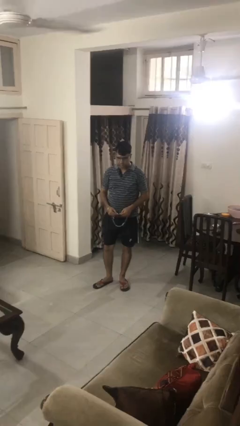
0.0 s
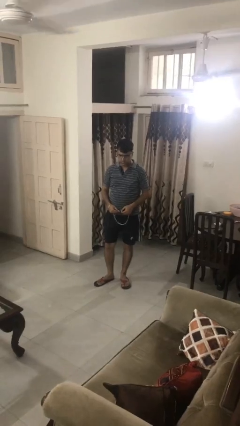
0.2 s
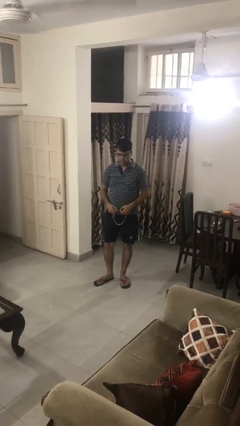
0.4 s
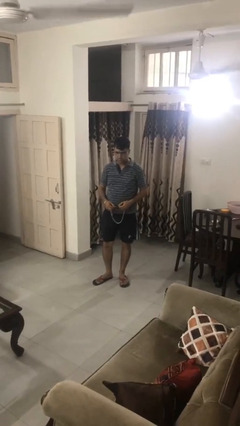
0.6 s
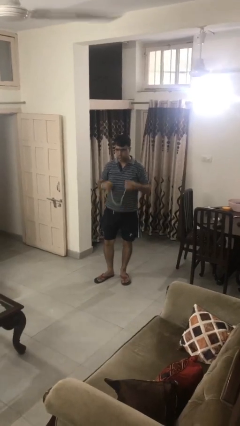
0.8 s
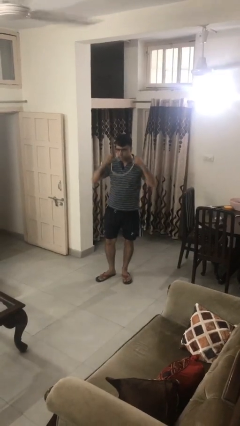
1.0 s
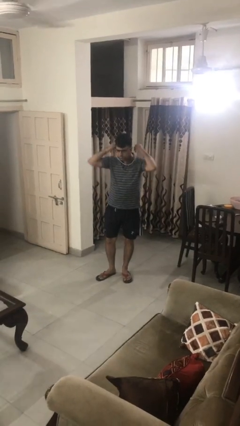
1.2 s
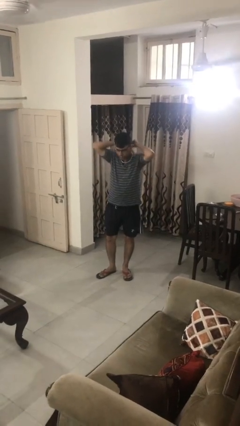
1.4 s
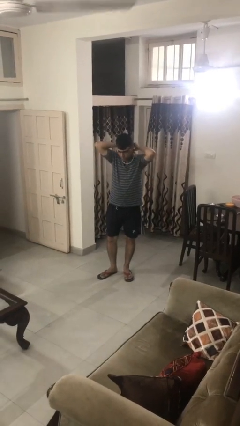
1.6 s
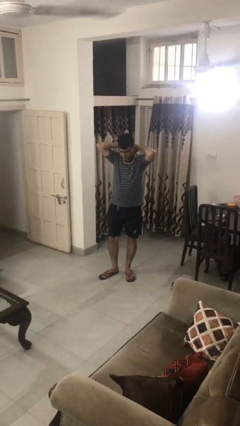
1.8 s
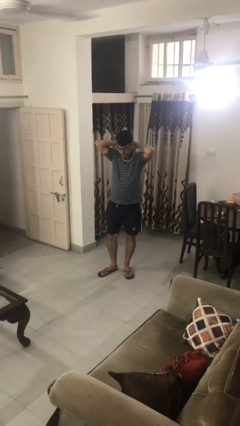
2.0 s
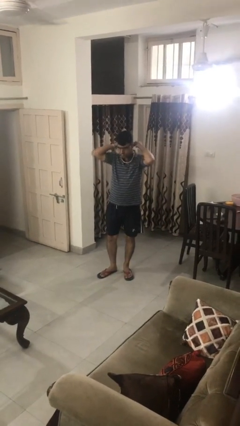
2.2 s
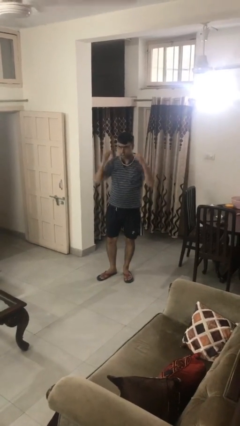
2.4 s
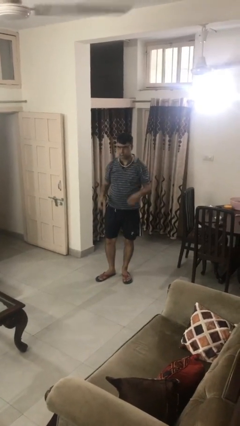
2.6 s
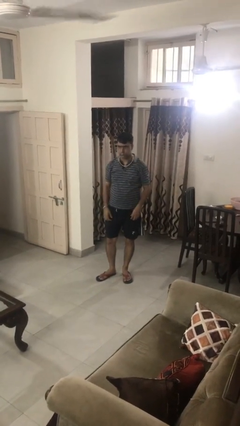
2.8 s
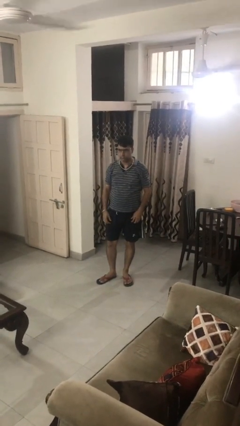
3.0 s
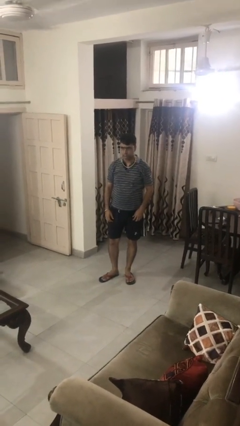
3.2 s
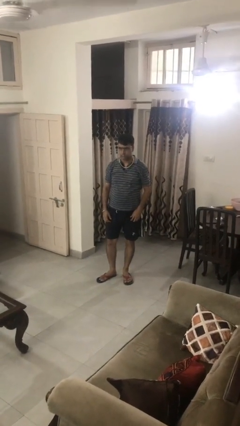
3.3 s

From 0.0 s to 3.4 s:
person puts on necklace

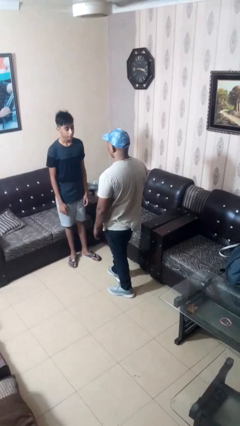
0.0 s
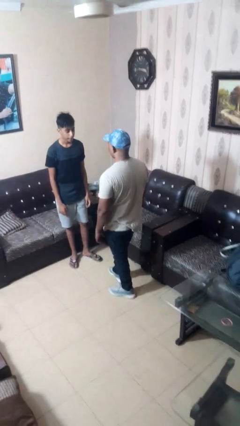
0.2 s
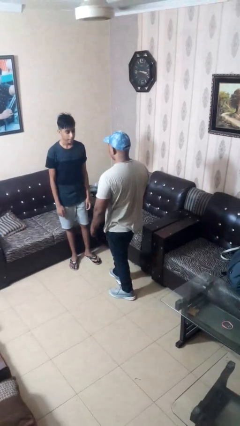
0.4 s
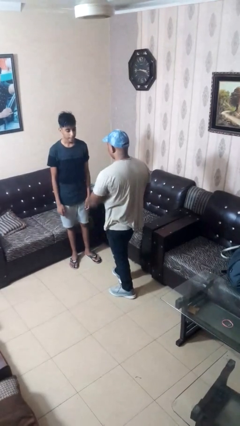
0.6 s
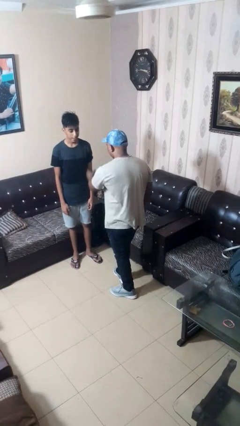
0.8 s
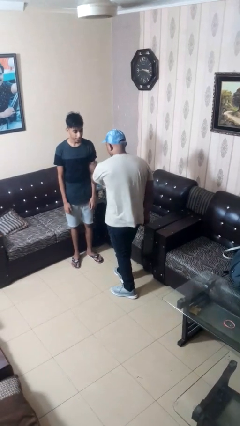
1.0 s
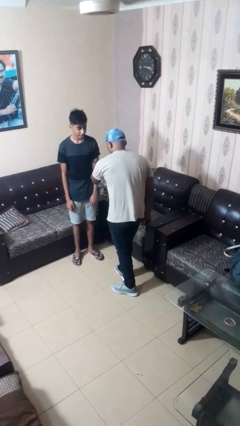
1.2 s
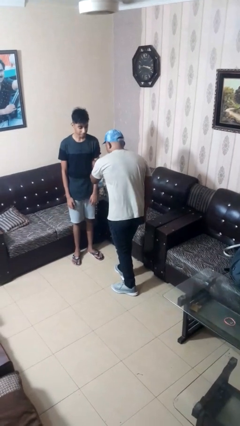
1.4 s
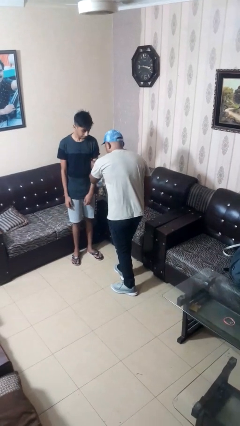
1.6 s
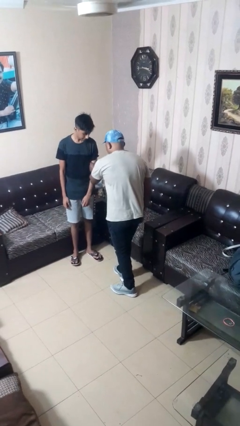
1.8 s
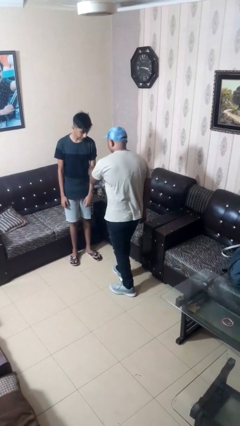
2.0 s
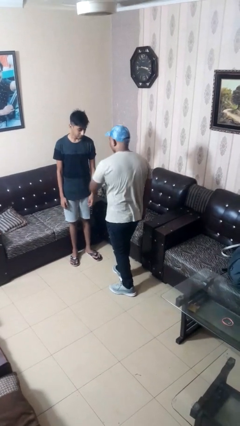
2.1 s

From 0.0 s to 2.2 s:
person grabs person by bicep

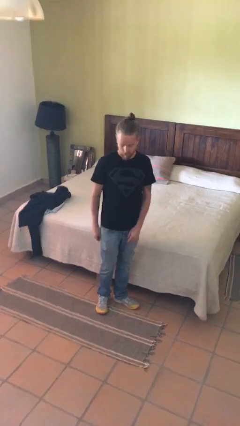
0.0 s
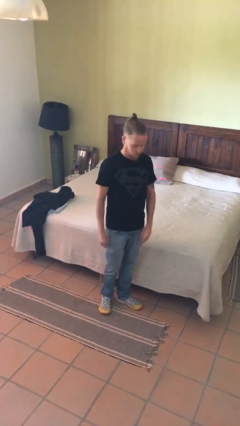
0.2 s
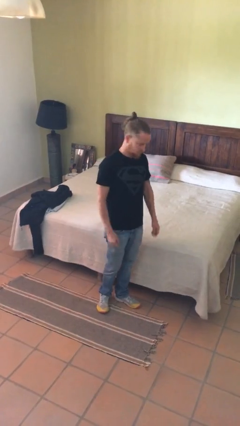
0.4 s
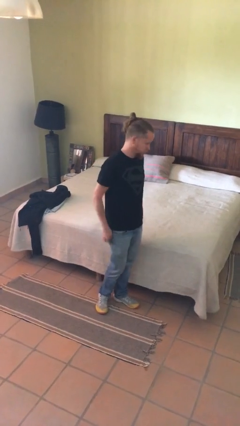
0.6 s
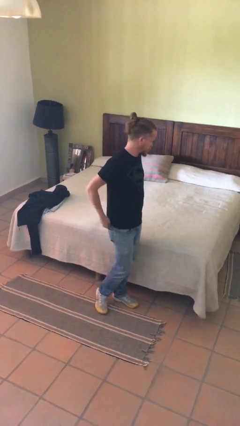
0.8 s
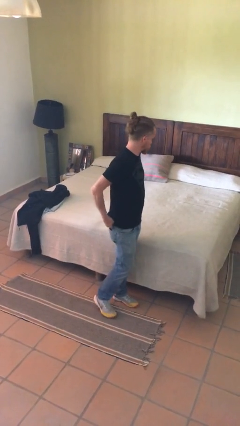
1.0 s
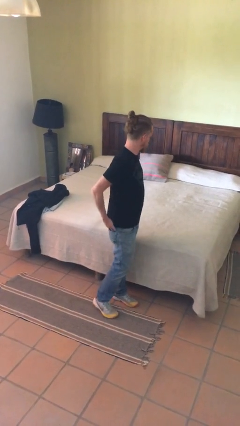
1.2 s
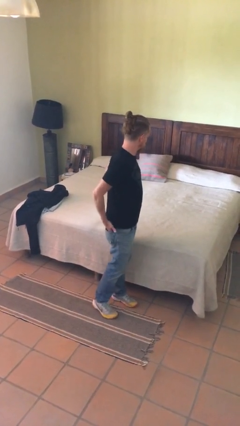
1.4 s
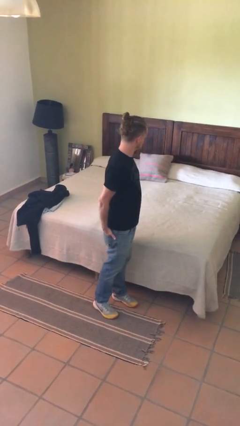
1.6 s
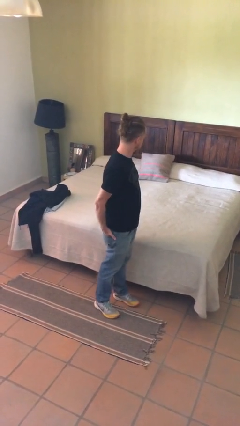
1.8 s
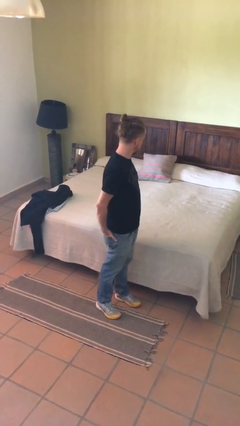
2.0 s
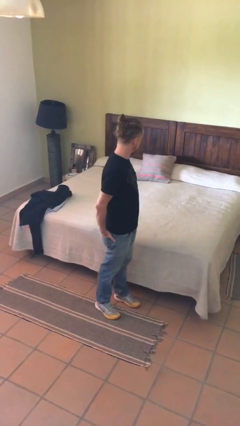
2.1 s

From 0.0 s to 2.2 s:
person puts hands in back pockets

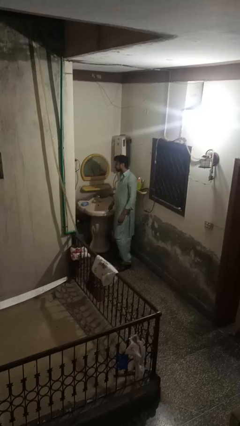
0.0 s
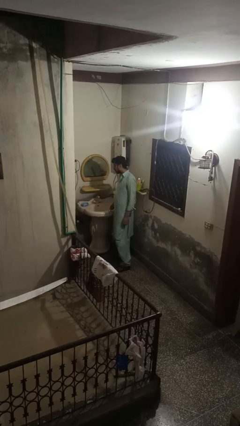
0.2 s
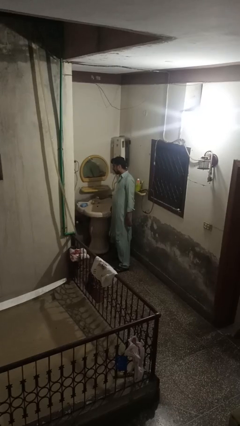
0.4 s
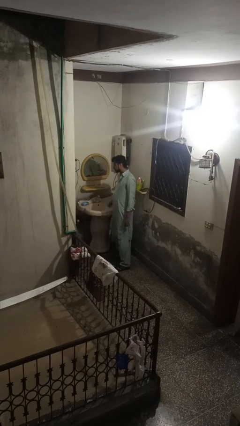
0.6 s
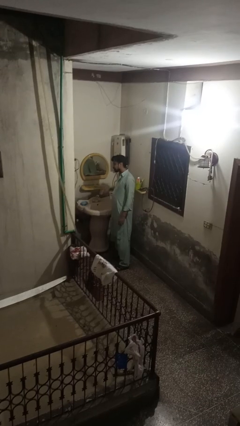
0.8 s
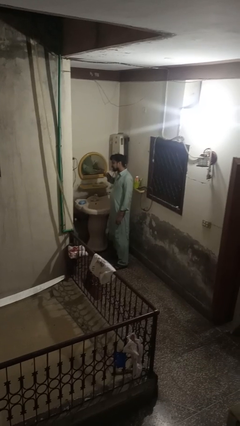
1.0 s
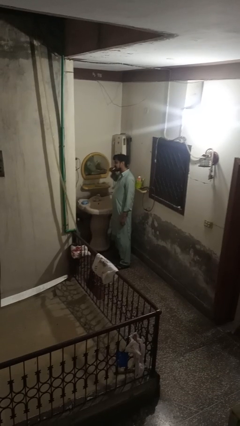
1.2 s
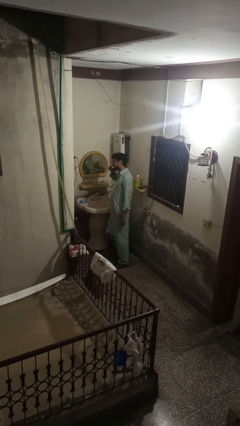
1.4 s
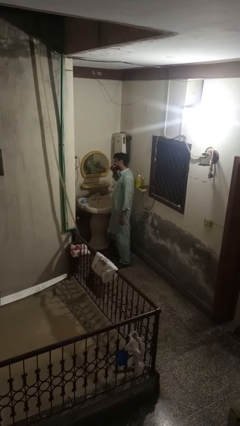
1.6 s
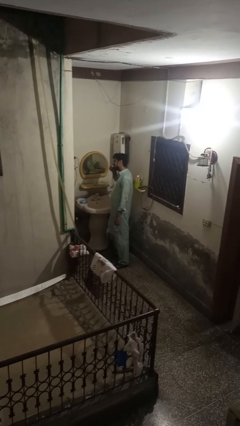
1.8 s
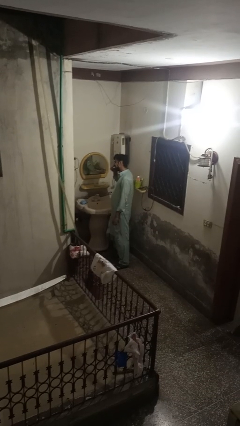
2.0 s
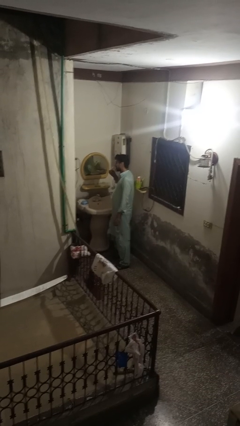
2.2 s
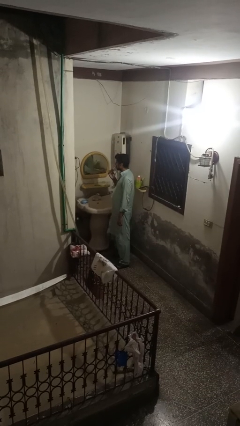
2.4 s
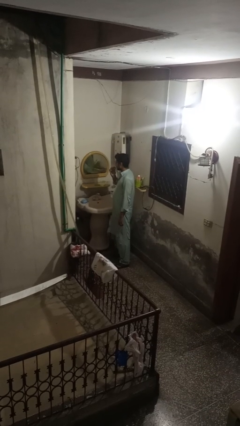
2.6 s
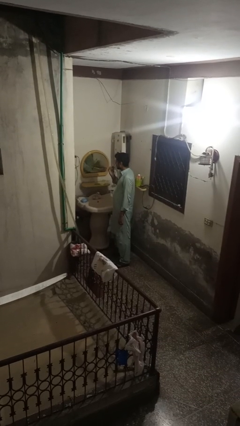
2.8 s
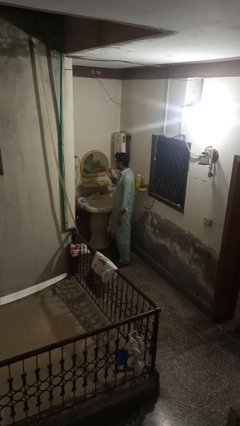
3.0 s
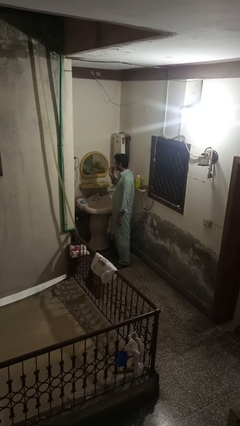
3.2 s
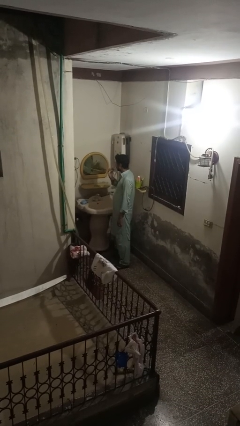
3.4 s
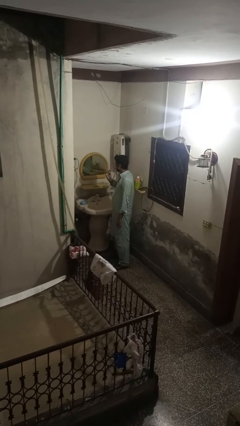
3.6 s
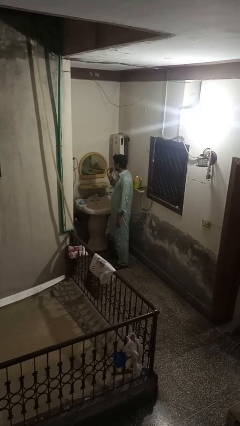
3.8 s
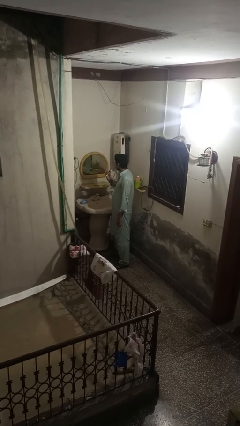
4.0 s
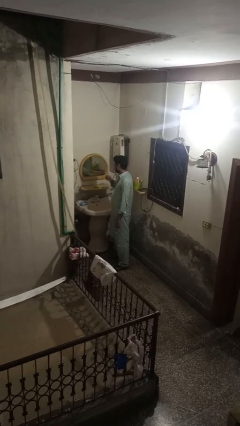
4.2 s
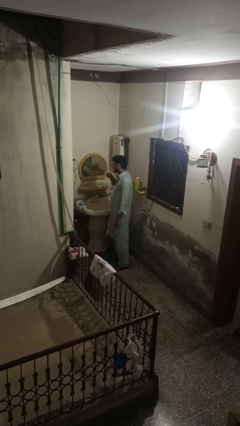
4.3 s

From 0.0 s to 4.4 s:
person brushes teeth

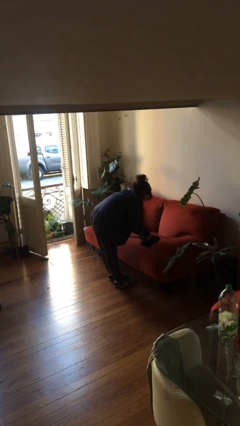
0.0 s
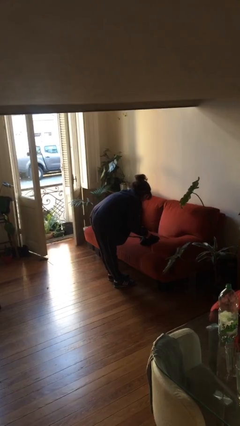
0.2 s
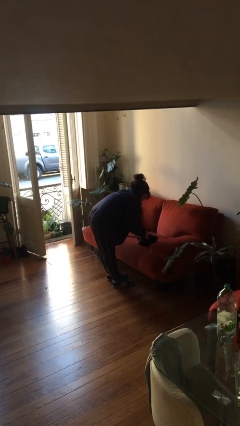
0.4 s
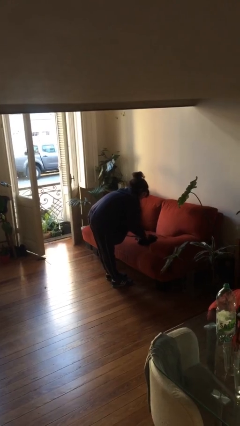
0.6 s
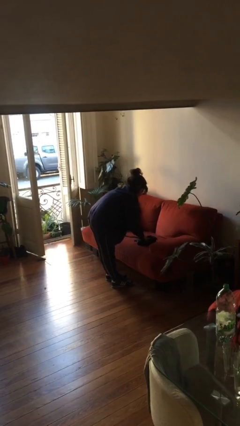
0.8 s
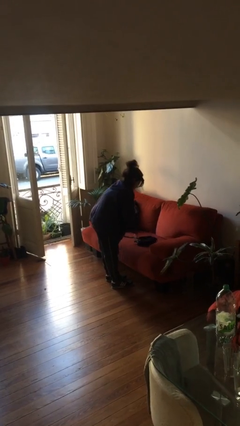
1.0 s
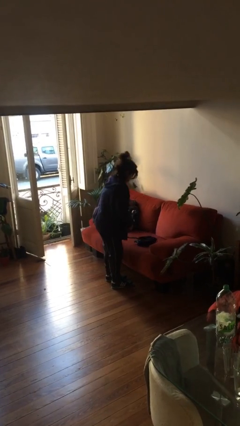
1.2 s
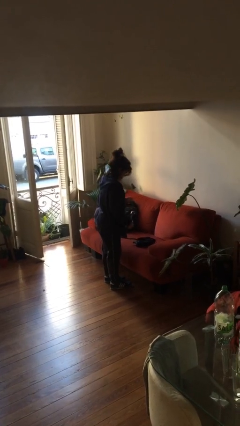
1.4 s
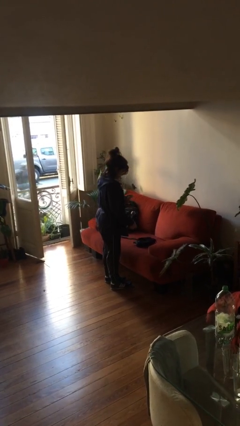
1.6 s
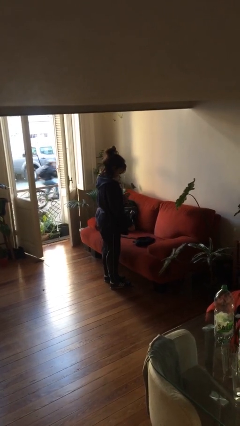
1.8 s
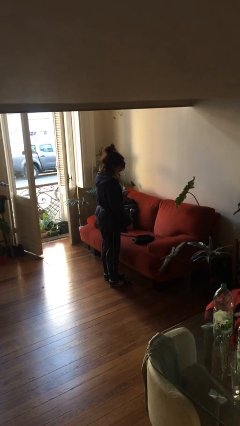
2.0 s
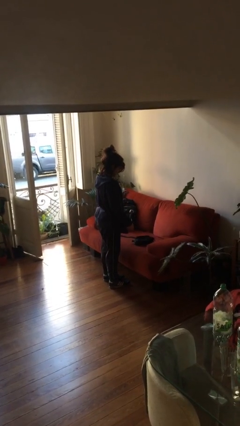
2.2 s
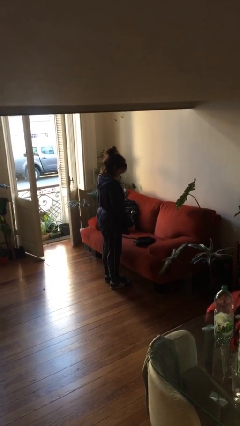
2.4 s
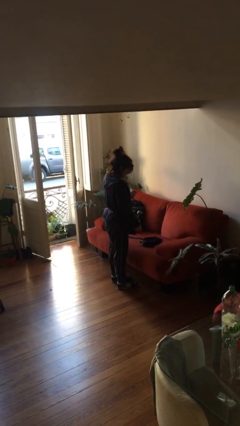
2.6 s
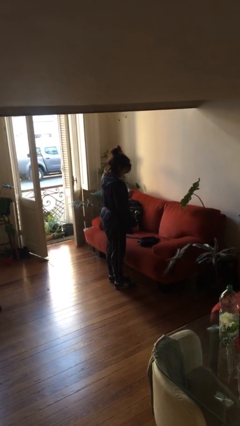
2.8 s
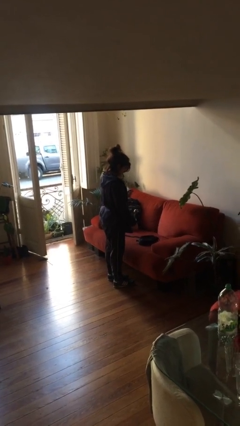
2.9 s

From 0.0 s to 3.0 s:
person takes object from purse

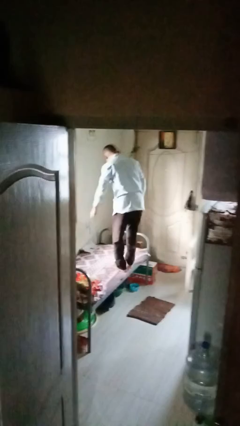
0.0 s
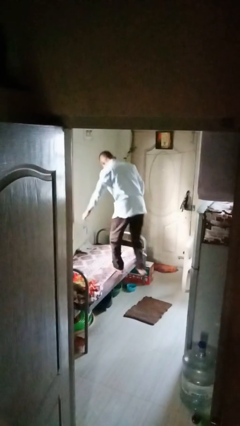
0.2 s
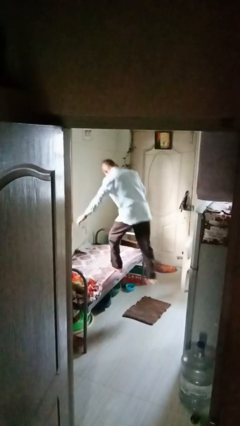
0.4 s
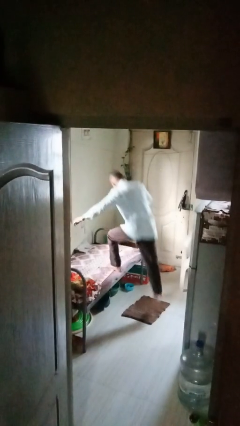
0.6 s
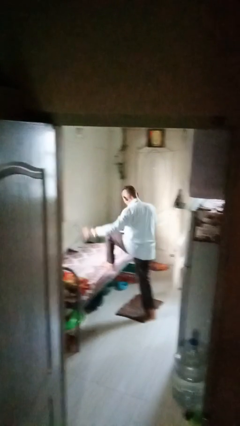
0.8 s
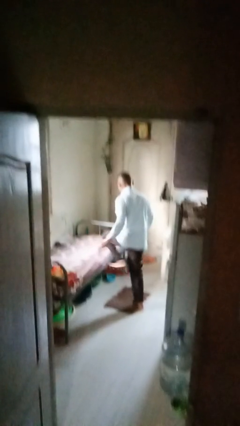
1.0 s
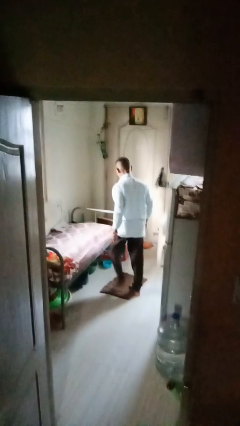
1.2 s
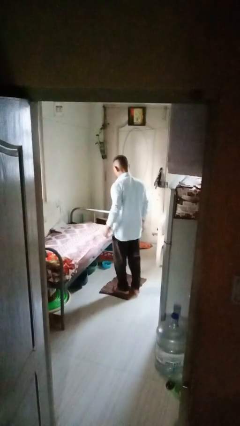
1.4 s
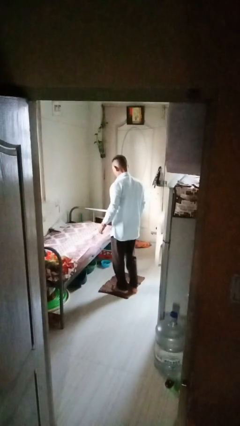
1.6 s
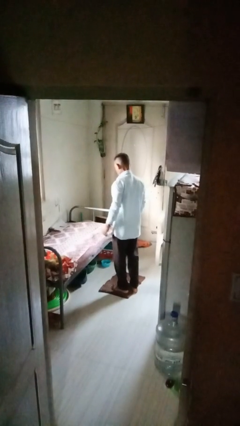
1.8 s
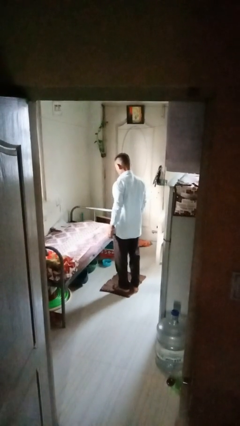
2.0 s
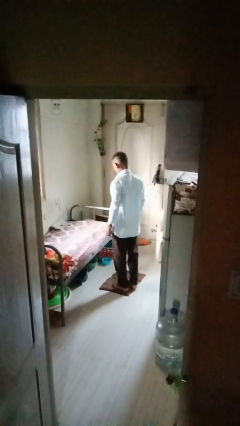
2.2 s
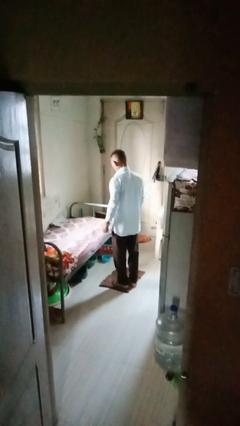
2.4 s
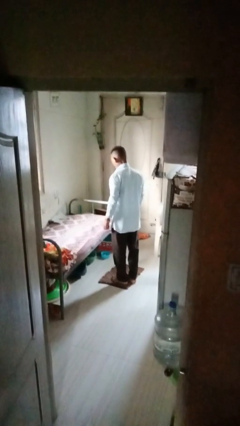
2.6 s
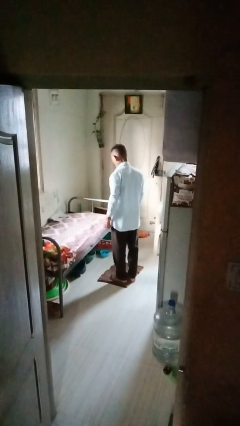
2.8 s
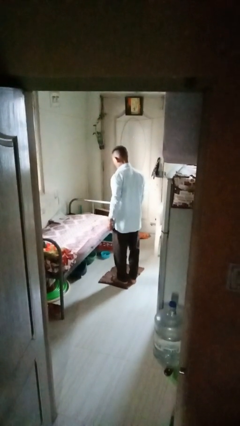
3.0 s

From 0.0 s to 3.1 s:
person jumps on bed
